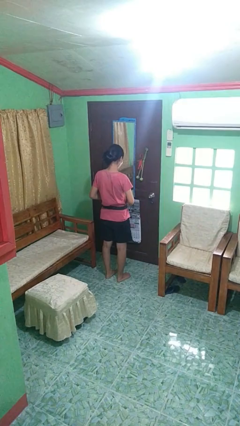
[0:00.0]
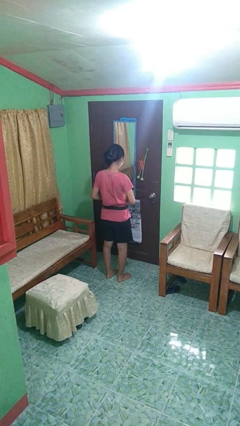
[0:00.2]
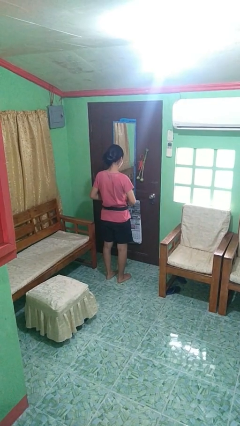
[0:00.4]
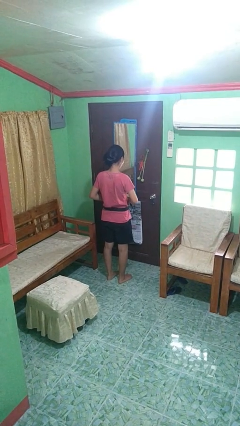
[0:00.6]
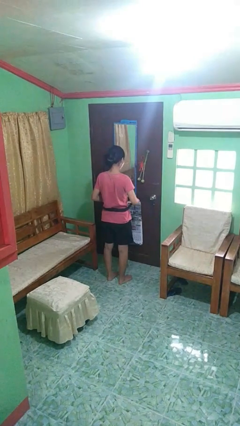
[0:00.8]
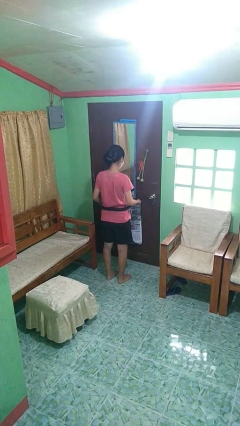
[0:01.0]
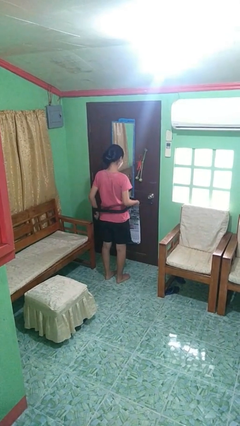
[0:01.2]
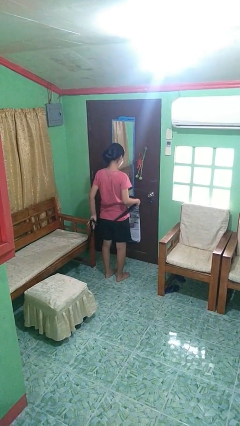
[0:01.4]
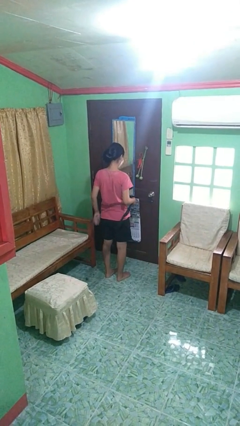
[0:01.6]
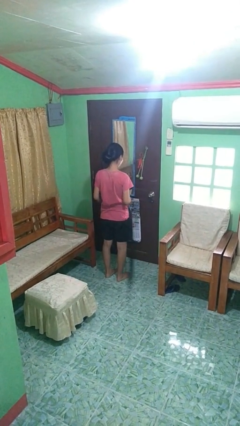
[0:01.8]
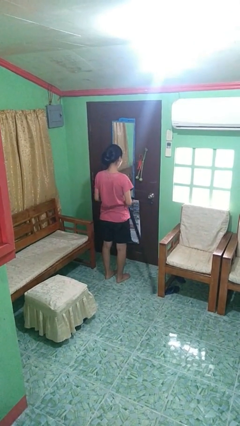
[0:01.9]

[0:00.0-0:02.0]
person takes off belt

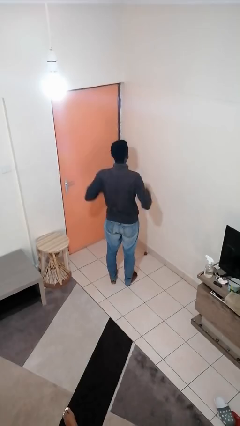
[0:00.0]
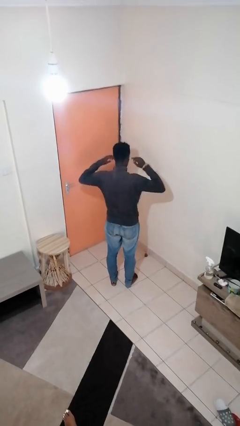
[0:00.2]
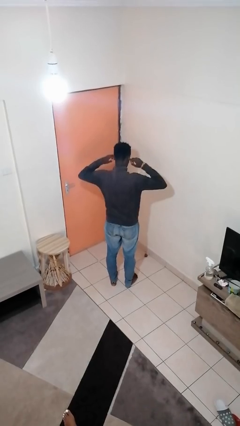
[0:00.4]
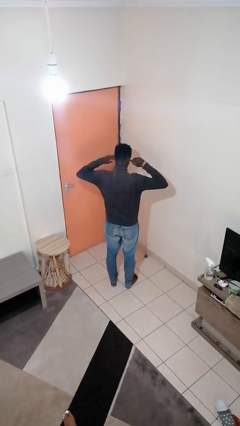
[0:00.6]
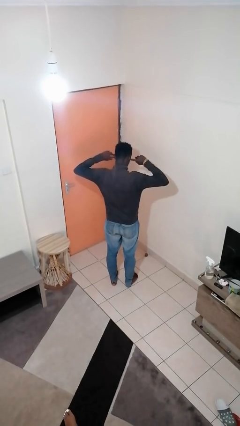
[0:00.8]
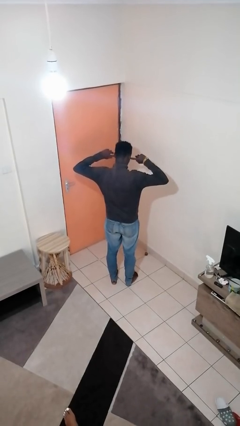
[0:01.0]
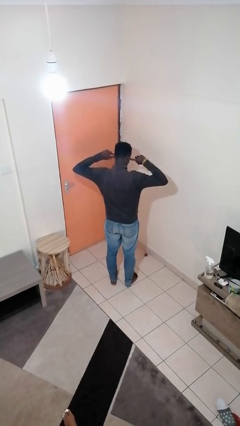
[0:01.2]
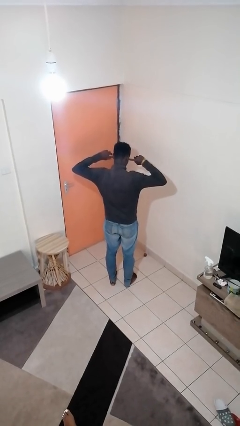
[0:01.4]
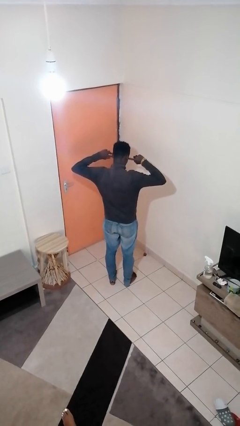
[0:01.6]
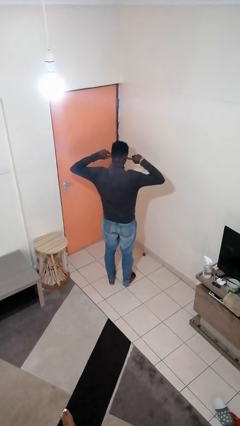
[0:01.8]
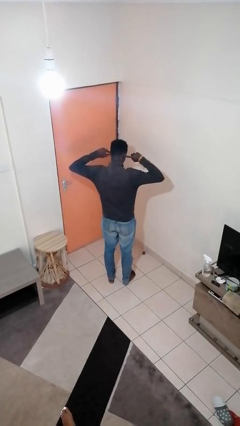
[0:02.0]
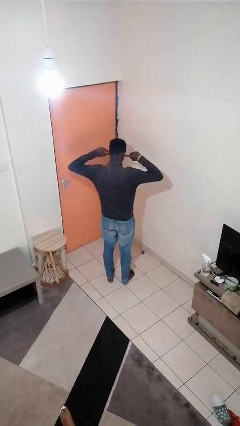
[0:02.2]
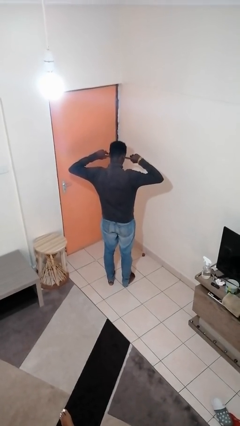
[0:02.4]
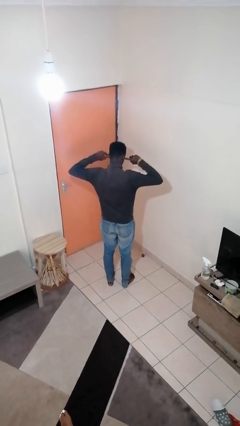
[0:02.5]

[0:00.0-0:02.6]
person puts fingers in ear

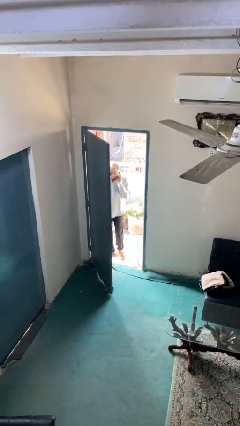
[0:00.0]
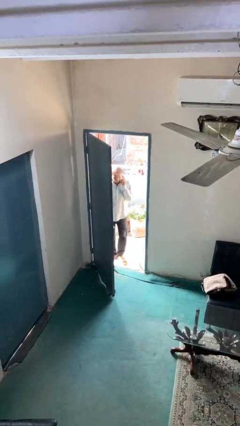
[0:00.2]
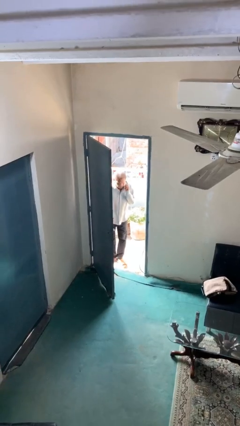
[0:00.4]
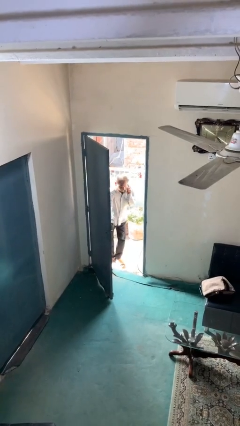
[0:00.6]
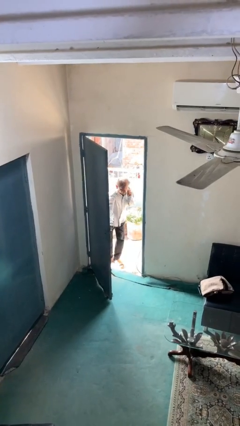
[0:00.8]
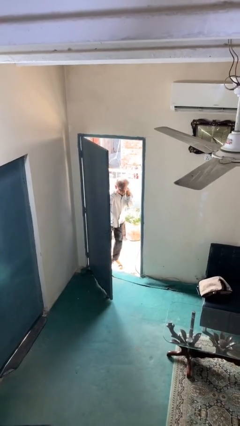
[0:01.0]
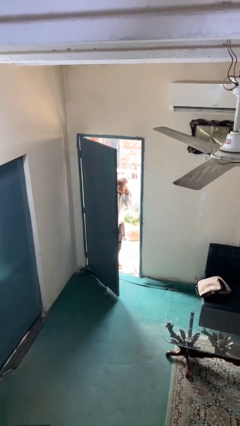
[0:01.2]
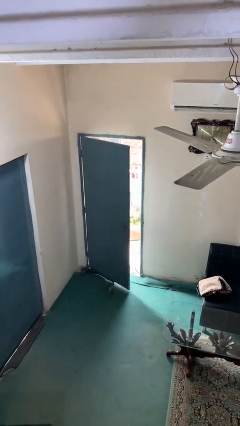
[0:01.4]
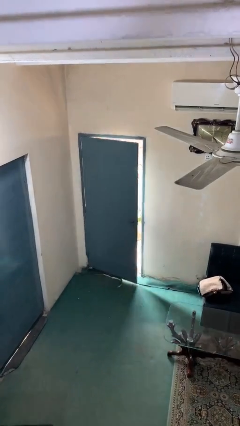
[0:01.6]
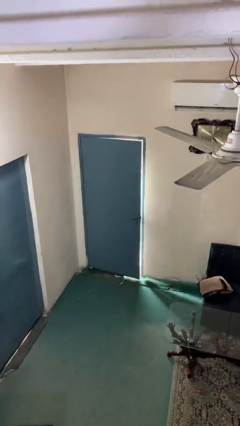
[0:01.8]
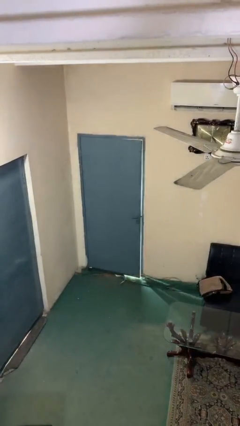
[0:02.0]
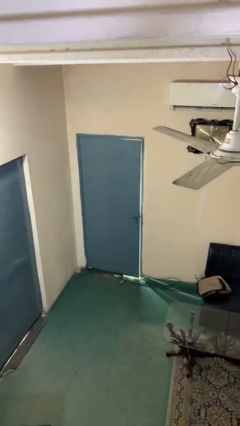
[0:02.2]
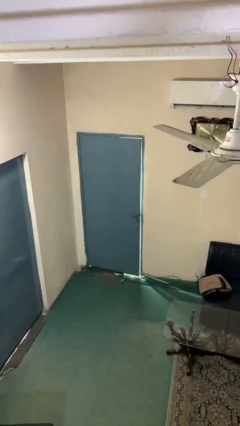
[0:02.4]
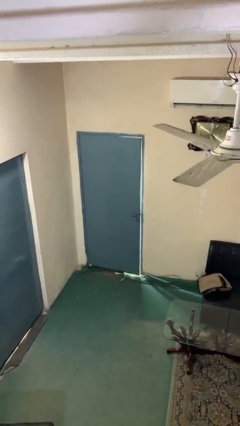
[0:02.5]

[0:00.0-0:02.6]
person closes facility door

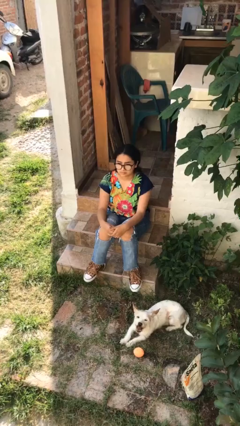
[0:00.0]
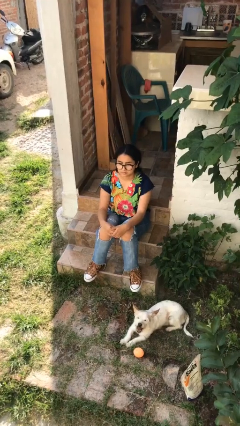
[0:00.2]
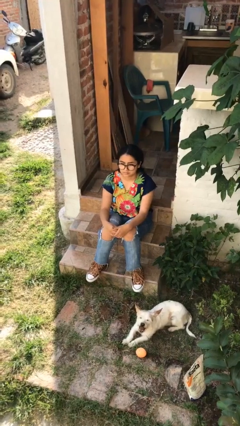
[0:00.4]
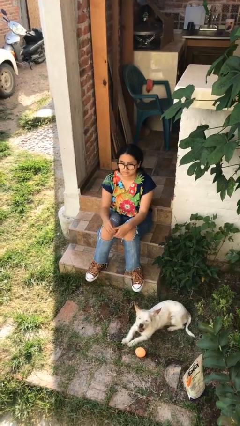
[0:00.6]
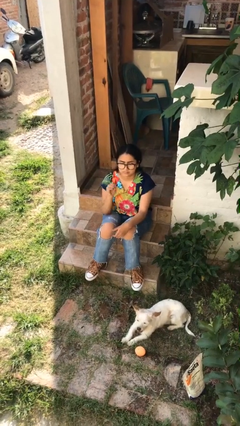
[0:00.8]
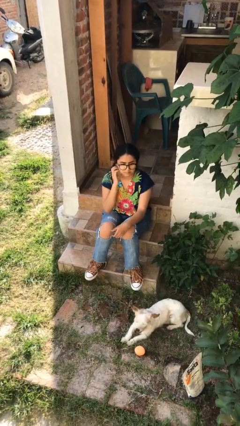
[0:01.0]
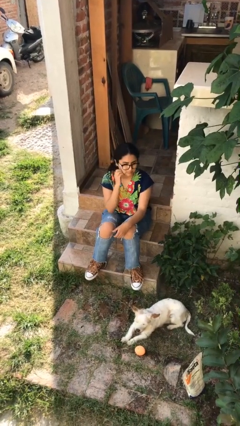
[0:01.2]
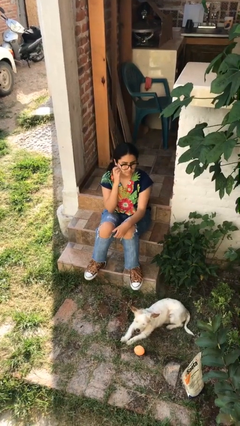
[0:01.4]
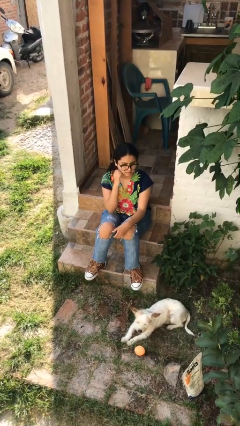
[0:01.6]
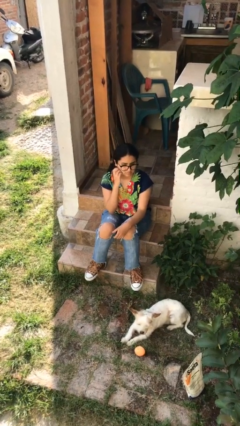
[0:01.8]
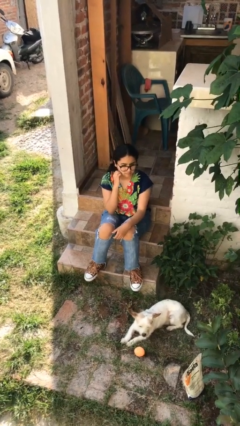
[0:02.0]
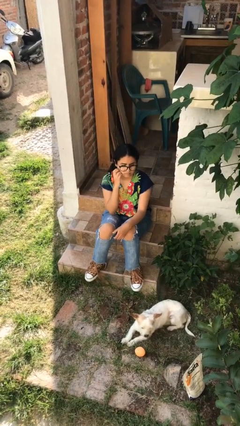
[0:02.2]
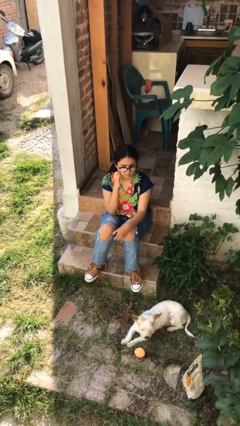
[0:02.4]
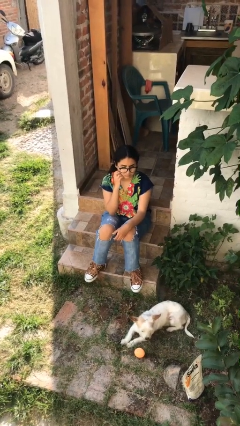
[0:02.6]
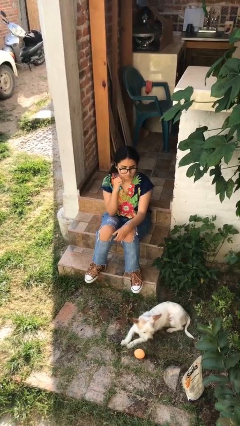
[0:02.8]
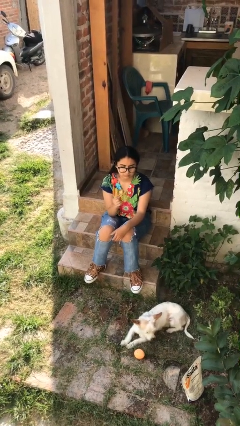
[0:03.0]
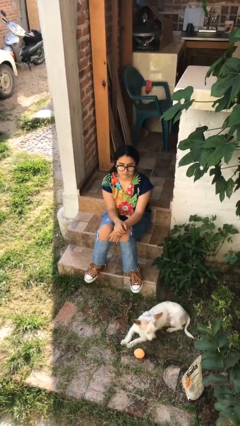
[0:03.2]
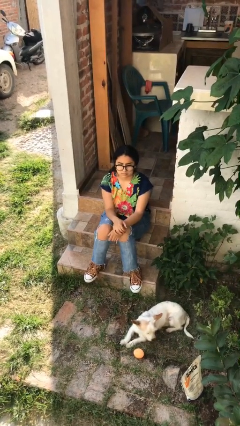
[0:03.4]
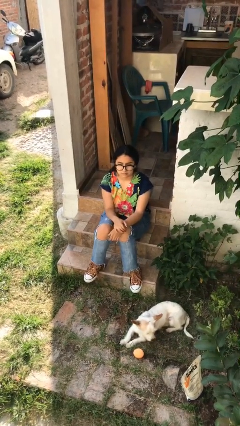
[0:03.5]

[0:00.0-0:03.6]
person scratches face

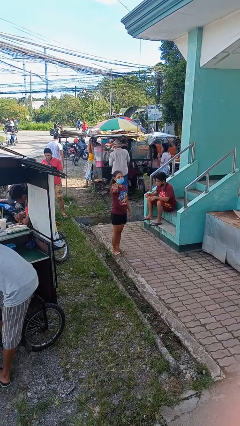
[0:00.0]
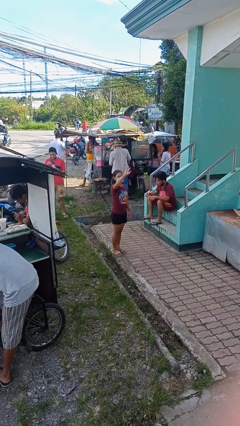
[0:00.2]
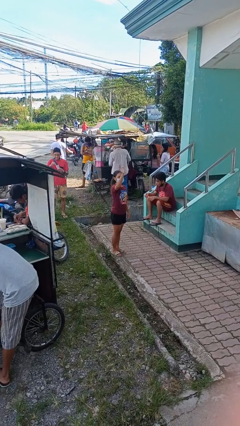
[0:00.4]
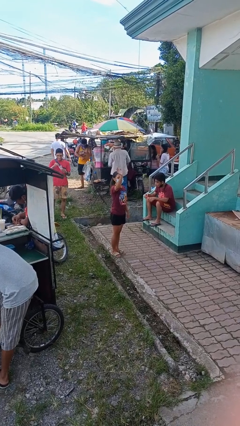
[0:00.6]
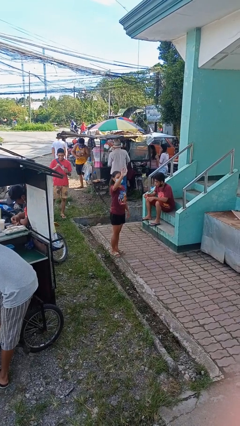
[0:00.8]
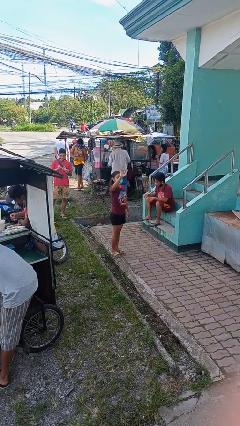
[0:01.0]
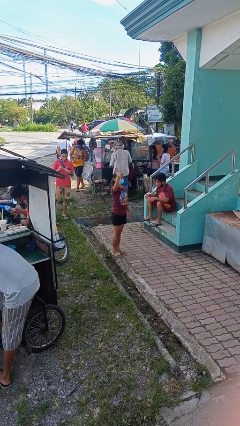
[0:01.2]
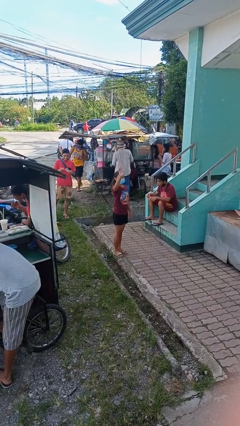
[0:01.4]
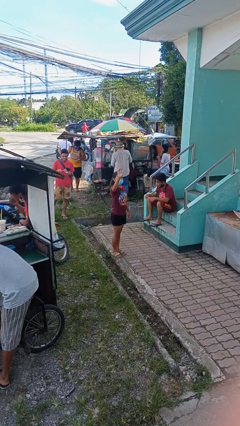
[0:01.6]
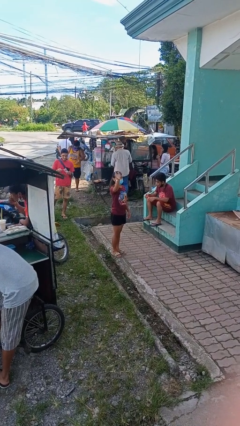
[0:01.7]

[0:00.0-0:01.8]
person waves at person

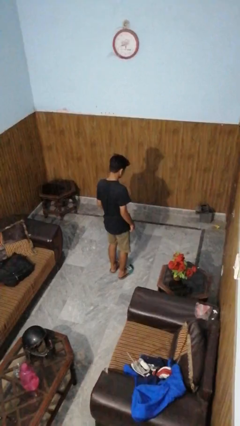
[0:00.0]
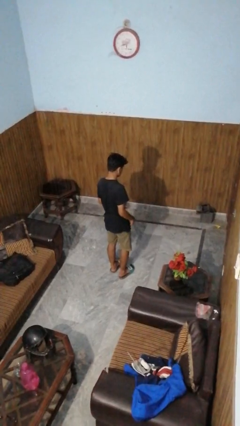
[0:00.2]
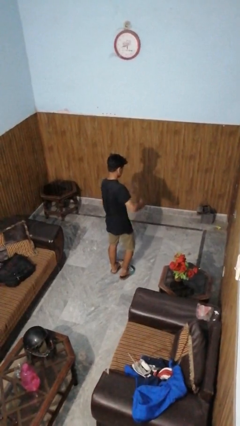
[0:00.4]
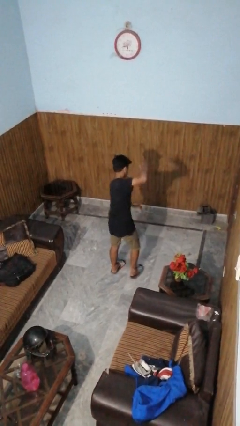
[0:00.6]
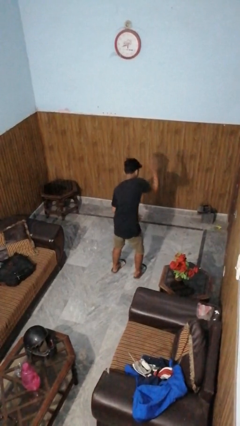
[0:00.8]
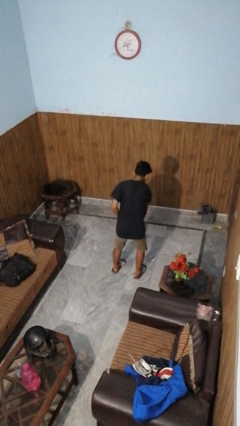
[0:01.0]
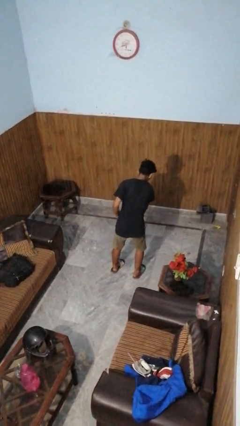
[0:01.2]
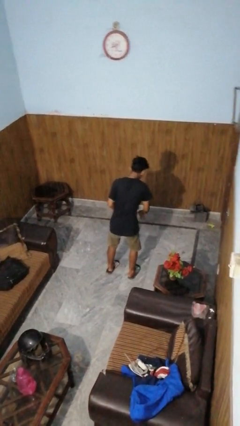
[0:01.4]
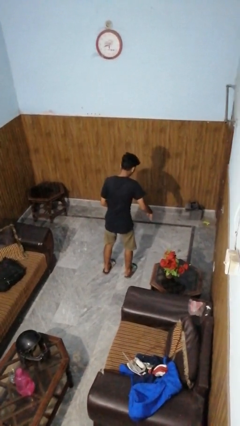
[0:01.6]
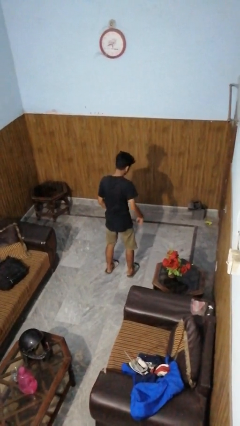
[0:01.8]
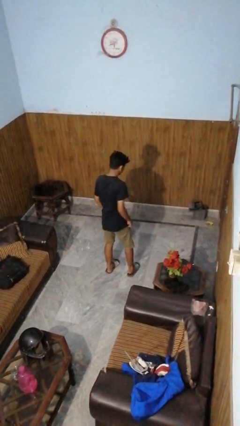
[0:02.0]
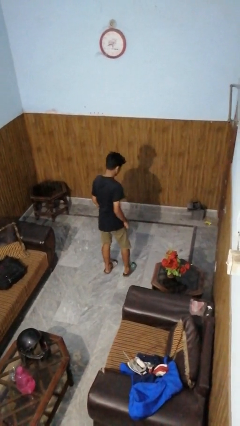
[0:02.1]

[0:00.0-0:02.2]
person karate chop

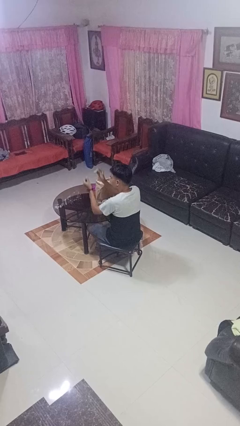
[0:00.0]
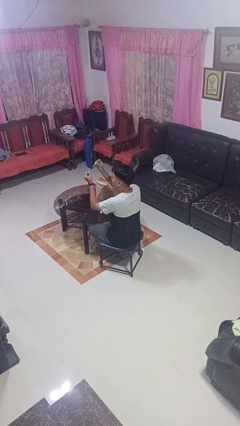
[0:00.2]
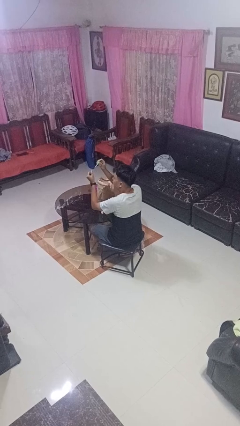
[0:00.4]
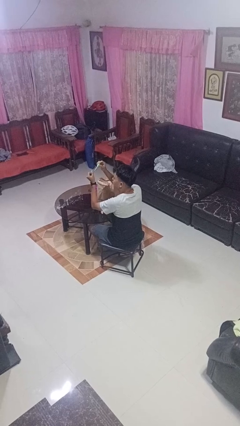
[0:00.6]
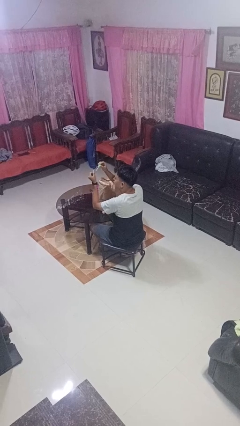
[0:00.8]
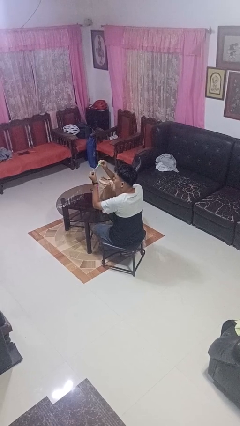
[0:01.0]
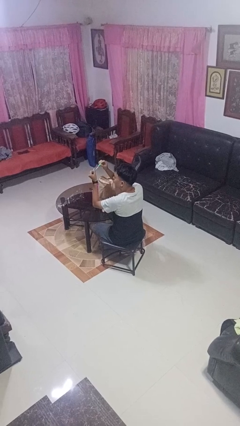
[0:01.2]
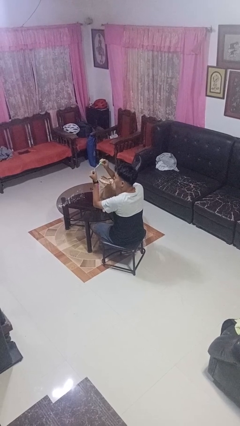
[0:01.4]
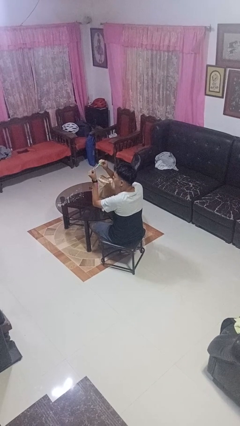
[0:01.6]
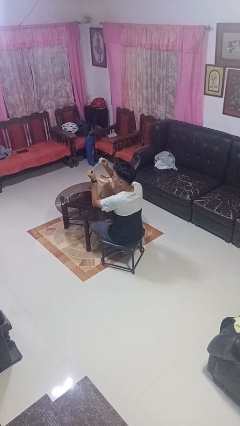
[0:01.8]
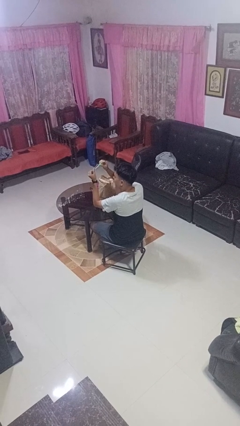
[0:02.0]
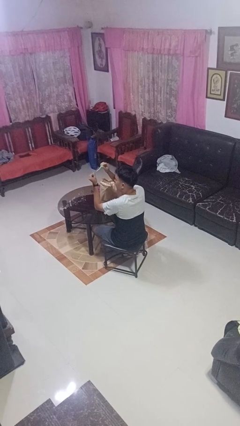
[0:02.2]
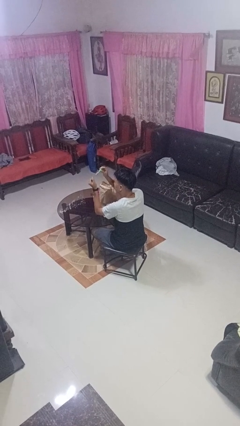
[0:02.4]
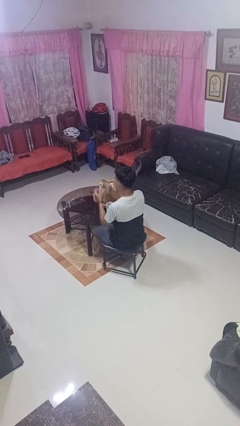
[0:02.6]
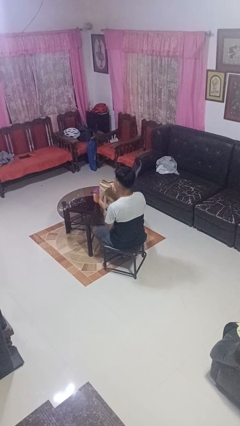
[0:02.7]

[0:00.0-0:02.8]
person paints fingernails
